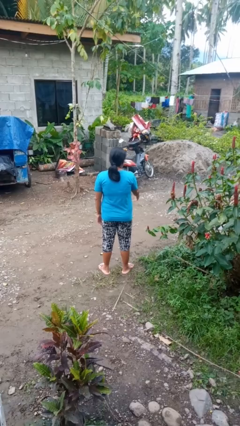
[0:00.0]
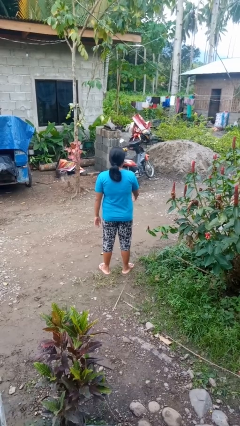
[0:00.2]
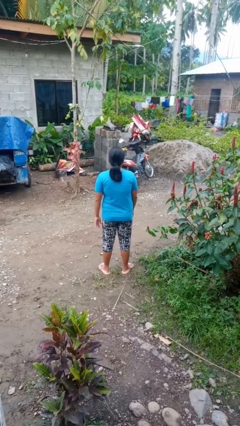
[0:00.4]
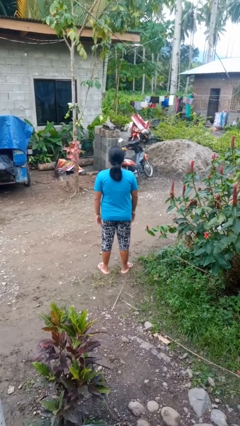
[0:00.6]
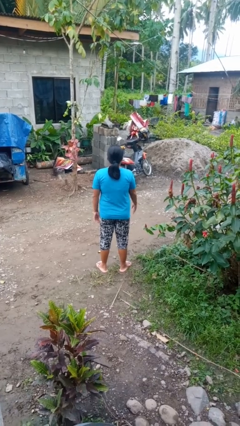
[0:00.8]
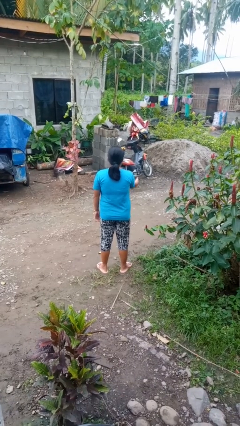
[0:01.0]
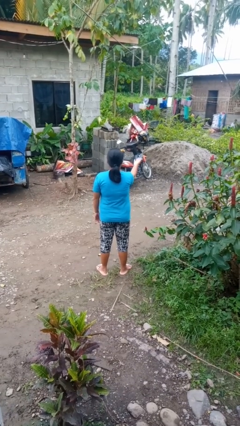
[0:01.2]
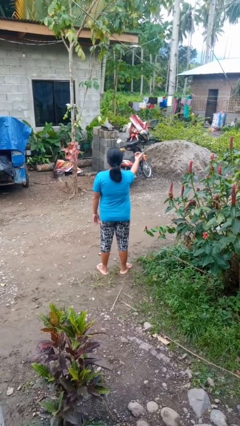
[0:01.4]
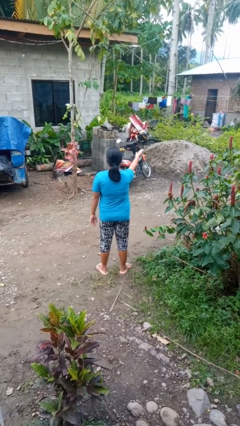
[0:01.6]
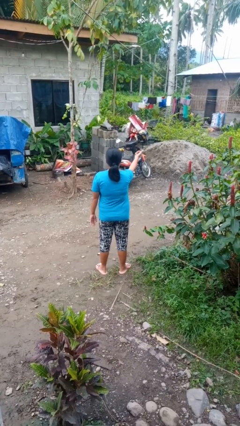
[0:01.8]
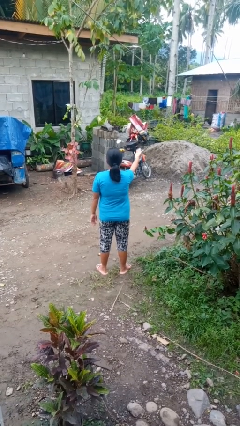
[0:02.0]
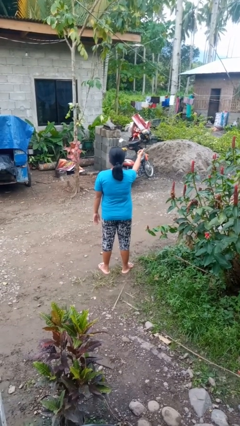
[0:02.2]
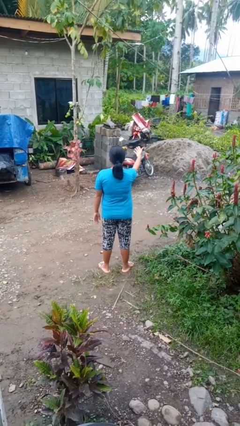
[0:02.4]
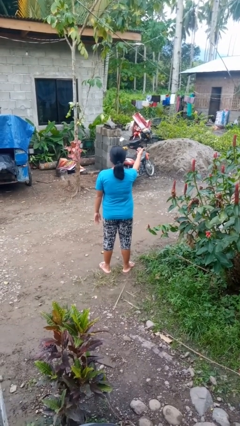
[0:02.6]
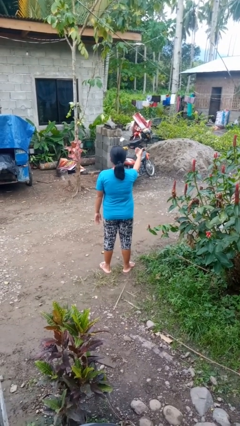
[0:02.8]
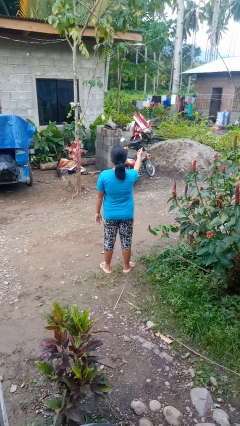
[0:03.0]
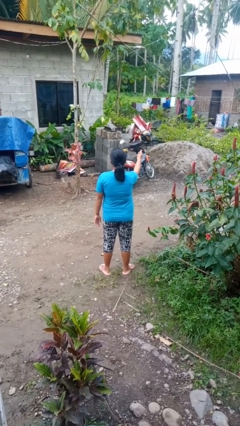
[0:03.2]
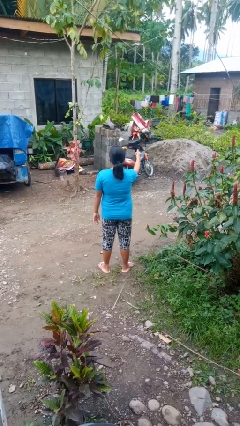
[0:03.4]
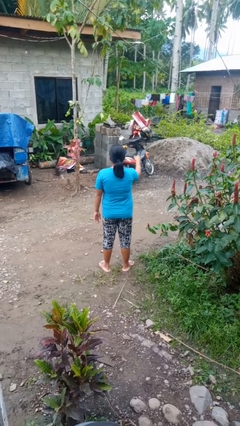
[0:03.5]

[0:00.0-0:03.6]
person gestures come here

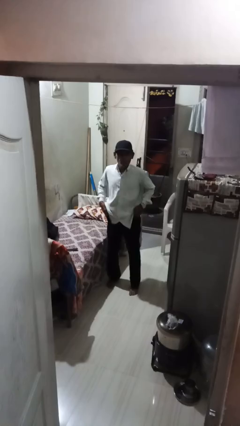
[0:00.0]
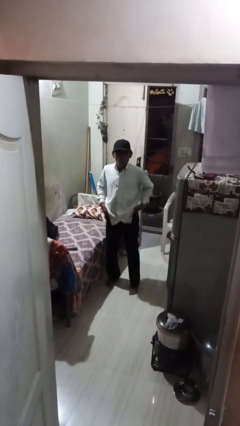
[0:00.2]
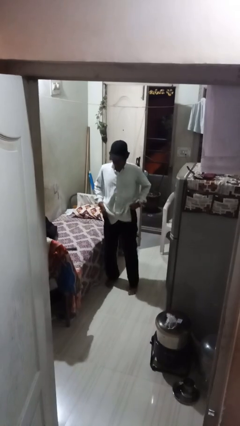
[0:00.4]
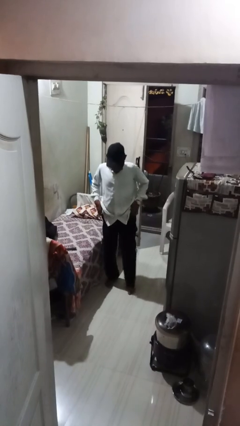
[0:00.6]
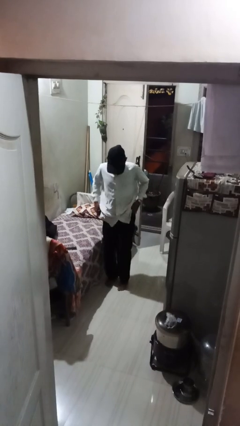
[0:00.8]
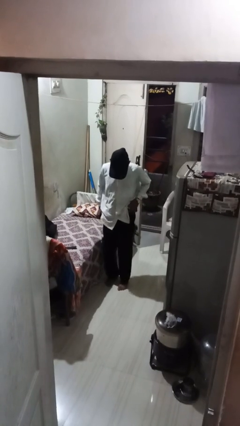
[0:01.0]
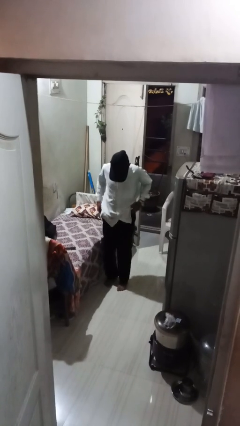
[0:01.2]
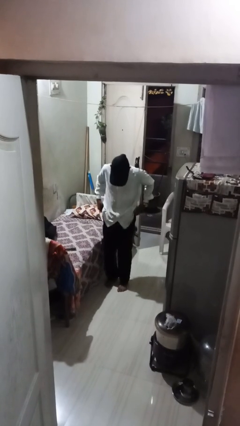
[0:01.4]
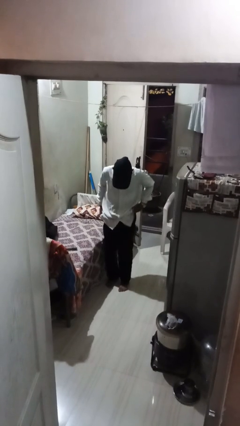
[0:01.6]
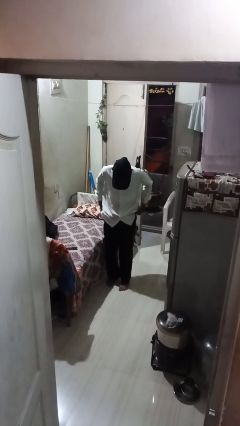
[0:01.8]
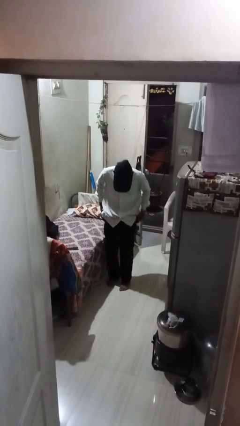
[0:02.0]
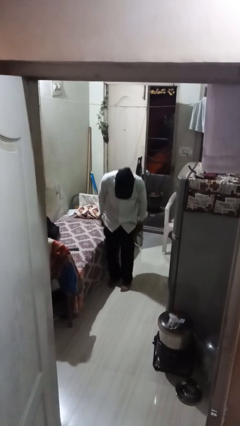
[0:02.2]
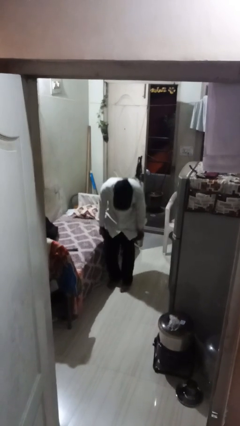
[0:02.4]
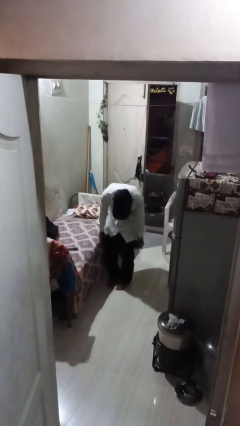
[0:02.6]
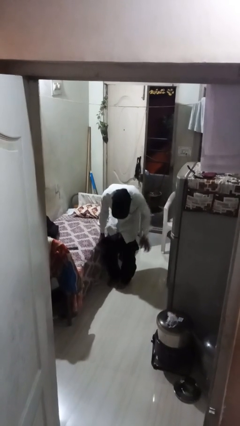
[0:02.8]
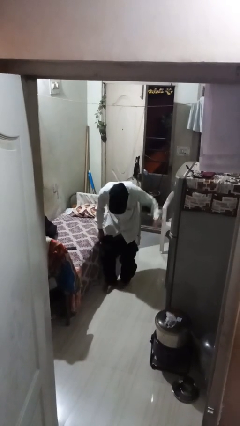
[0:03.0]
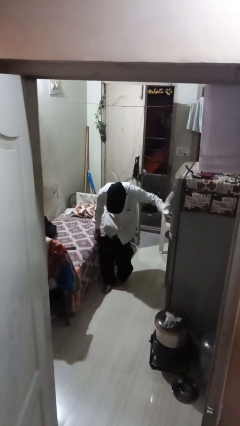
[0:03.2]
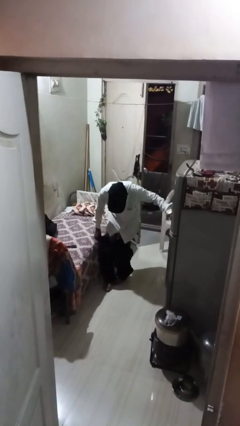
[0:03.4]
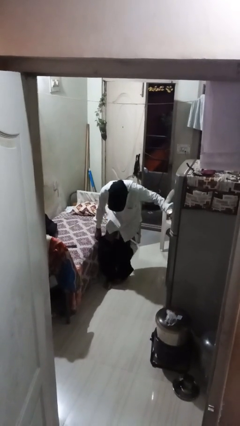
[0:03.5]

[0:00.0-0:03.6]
person takes off pants

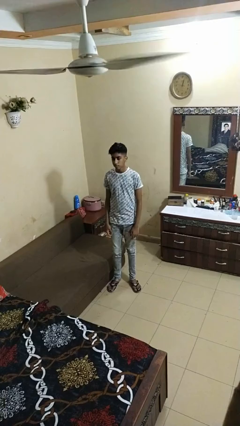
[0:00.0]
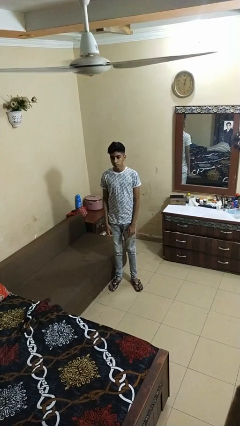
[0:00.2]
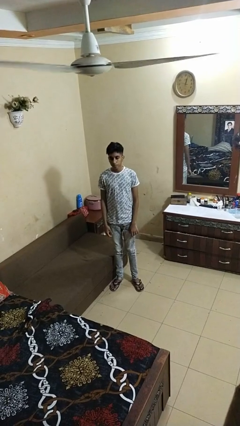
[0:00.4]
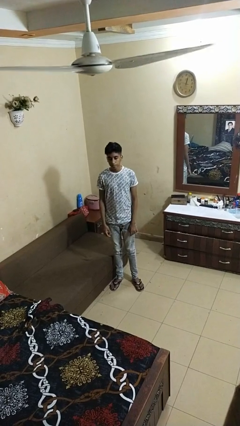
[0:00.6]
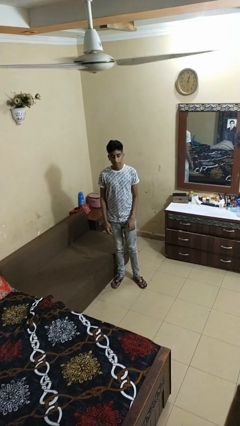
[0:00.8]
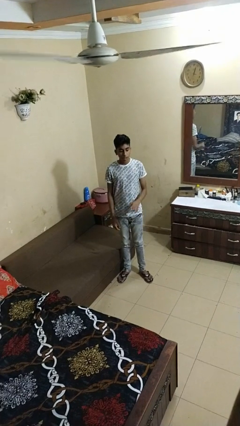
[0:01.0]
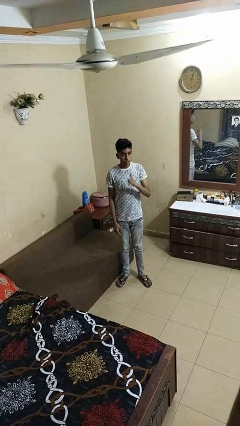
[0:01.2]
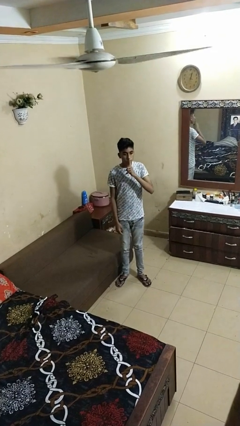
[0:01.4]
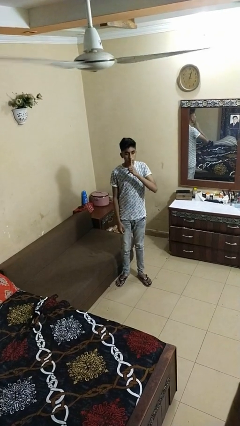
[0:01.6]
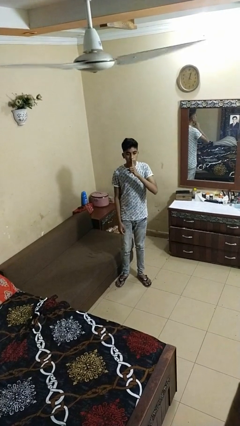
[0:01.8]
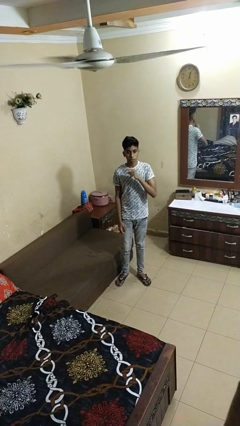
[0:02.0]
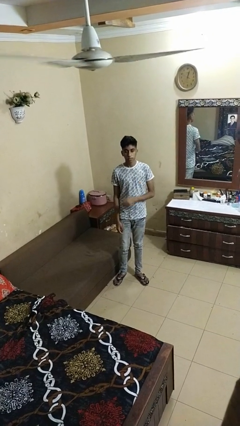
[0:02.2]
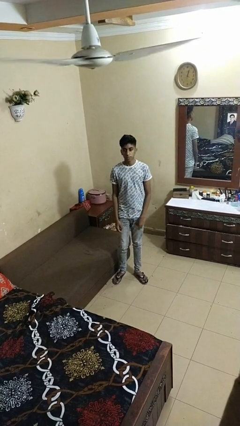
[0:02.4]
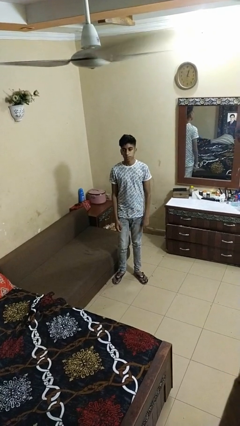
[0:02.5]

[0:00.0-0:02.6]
person gestures be quiet

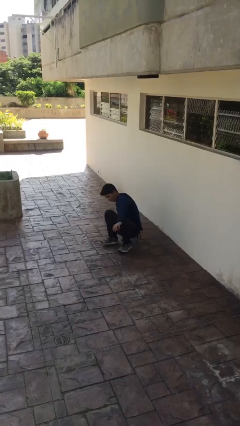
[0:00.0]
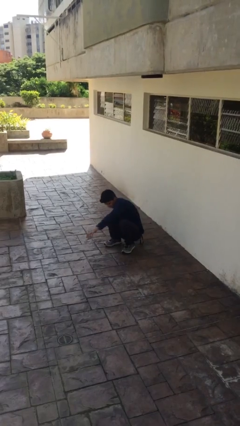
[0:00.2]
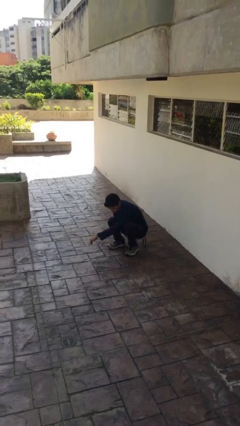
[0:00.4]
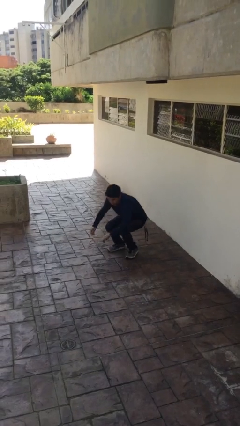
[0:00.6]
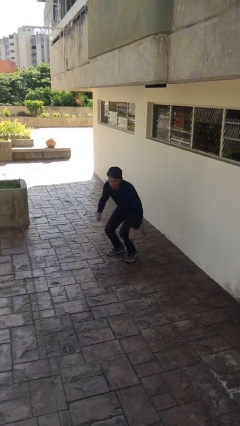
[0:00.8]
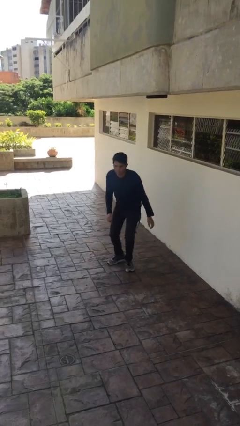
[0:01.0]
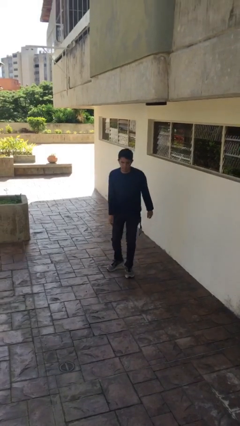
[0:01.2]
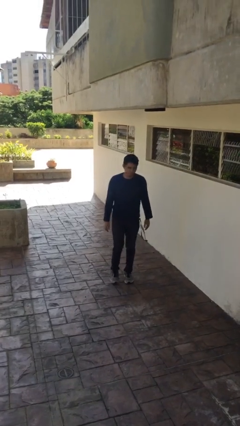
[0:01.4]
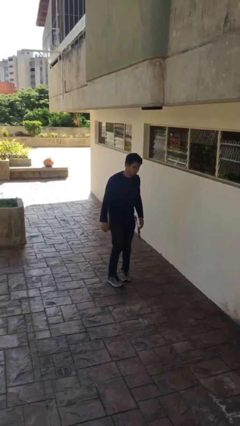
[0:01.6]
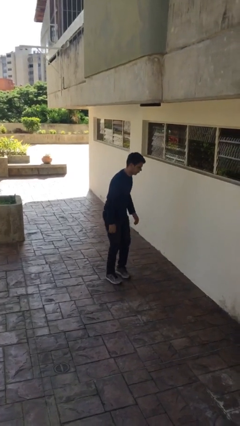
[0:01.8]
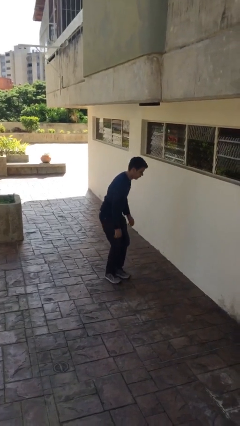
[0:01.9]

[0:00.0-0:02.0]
person stands up

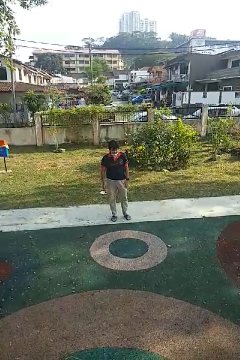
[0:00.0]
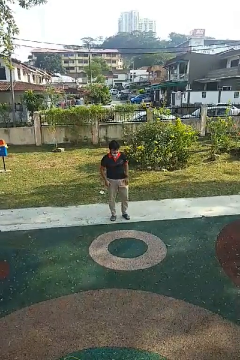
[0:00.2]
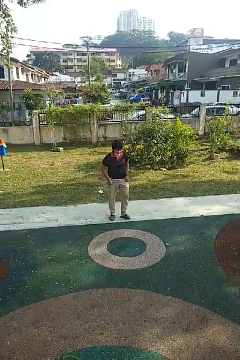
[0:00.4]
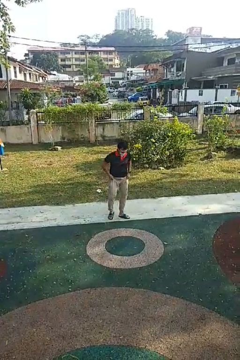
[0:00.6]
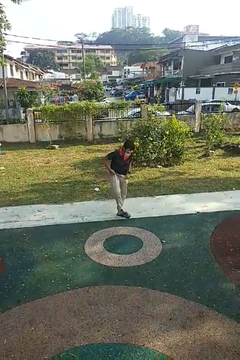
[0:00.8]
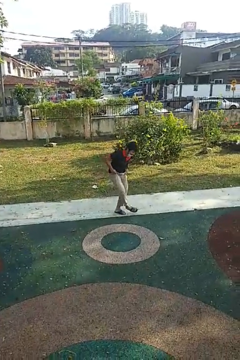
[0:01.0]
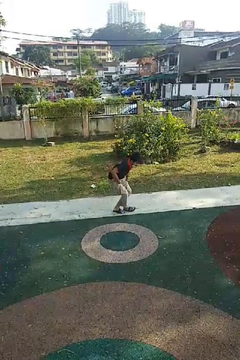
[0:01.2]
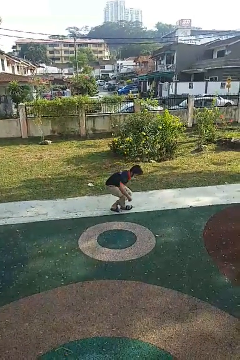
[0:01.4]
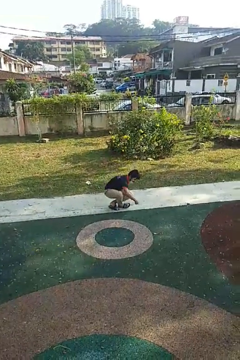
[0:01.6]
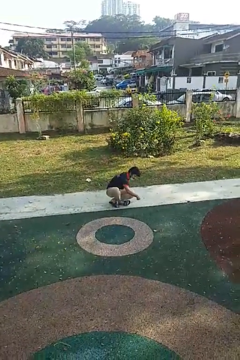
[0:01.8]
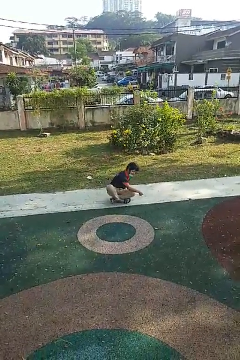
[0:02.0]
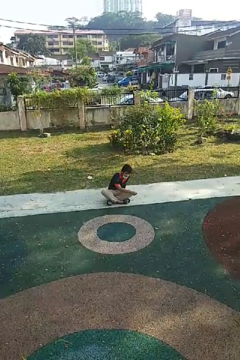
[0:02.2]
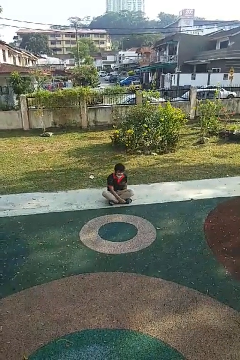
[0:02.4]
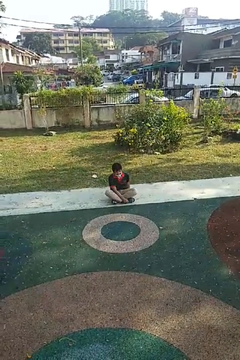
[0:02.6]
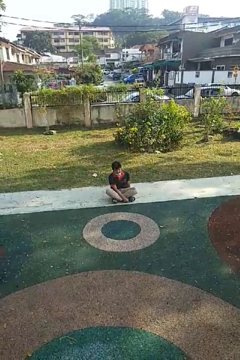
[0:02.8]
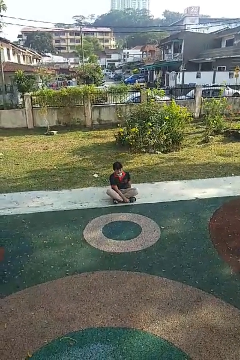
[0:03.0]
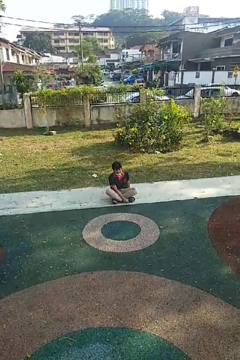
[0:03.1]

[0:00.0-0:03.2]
person sits crisscross

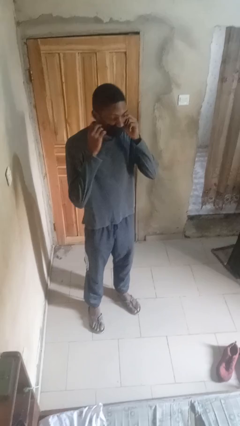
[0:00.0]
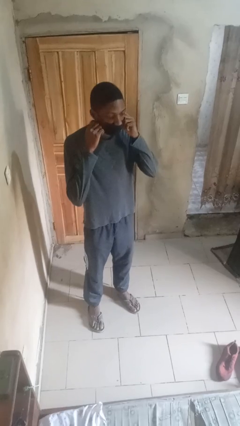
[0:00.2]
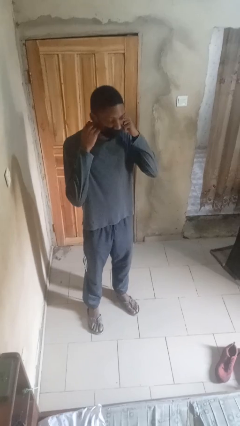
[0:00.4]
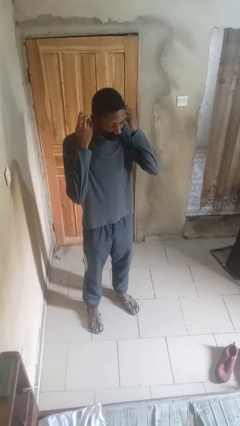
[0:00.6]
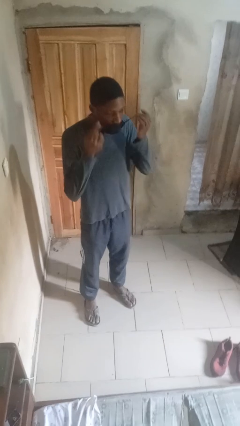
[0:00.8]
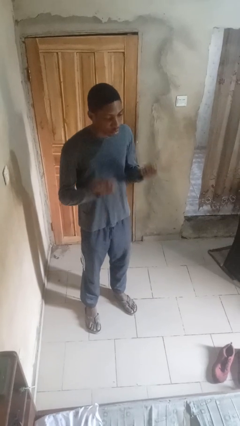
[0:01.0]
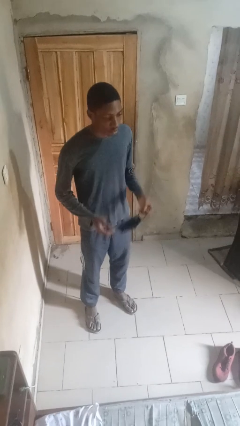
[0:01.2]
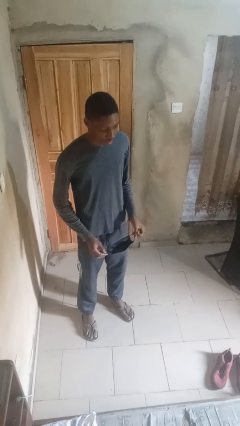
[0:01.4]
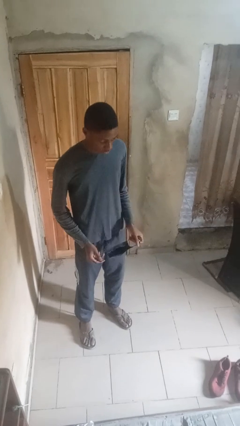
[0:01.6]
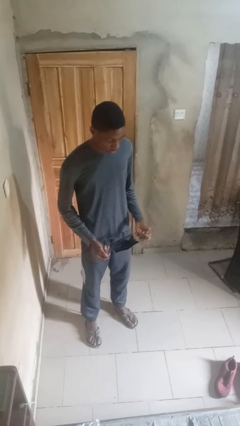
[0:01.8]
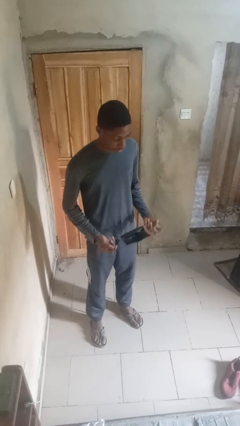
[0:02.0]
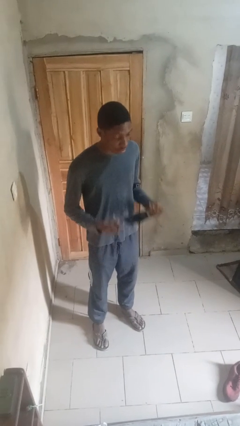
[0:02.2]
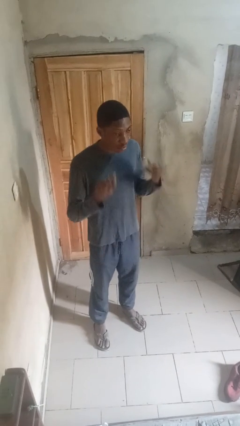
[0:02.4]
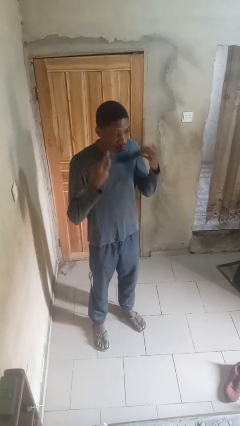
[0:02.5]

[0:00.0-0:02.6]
person takes off facemask

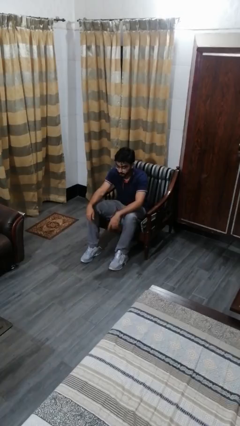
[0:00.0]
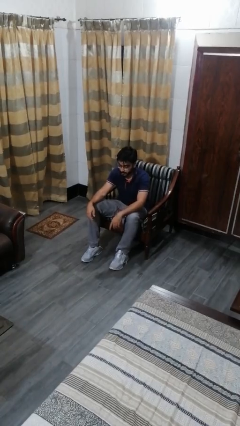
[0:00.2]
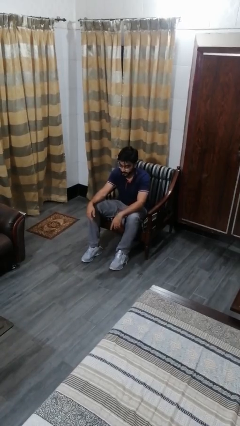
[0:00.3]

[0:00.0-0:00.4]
person puts on shoes
